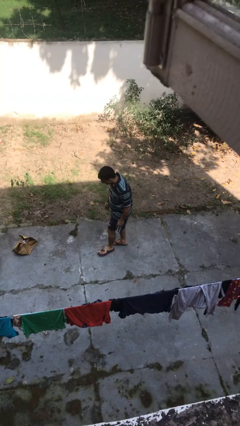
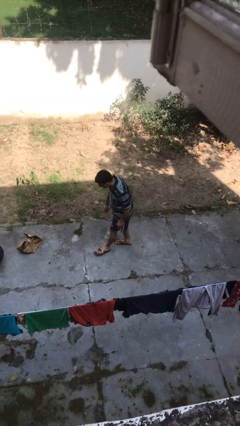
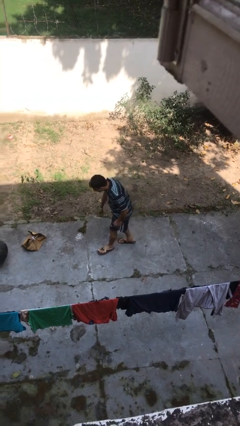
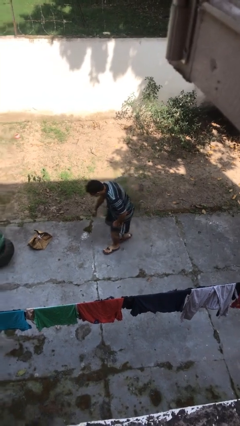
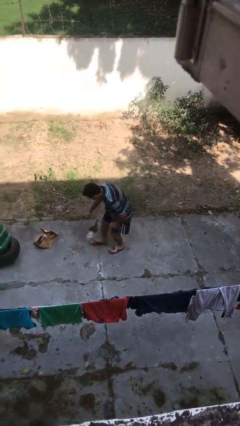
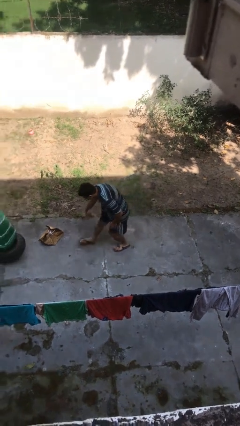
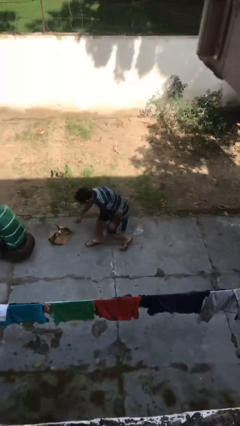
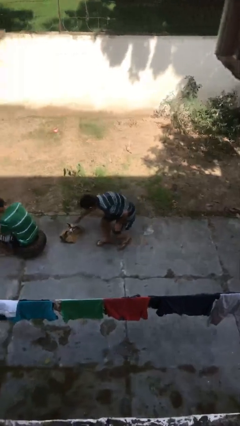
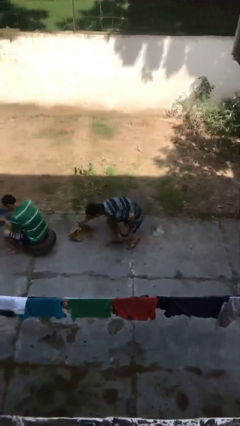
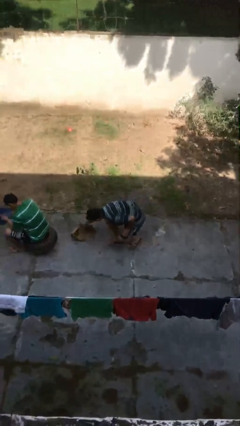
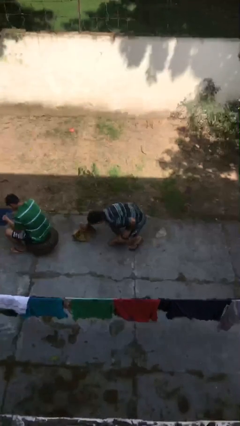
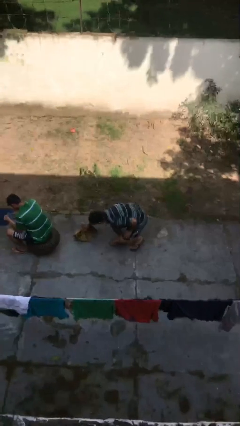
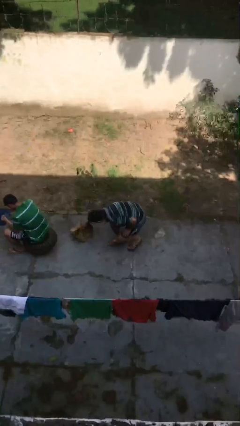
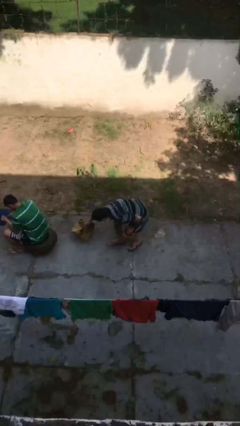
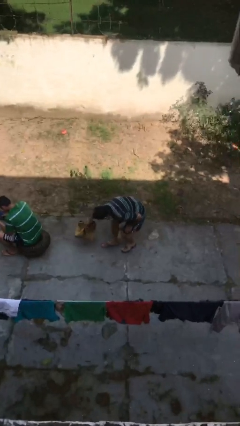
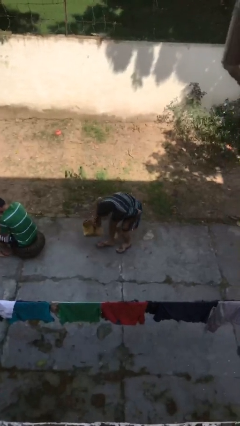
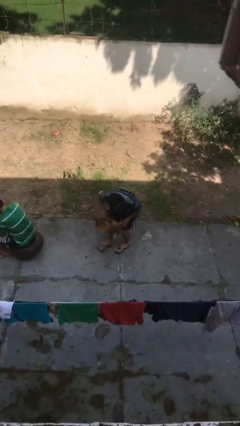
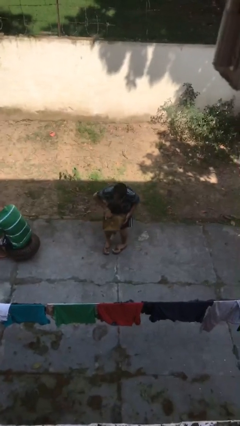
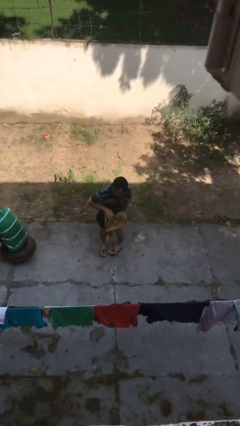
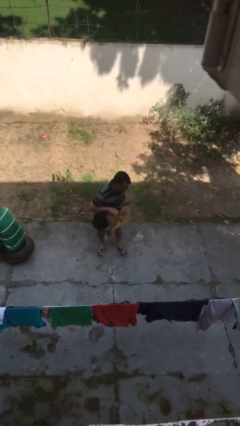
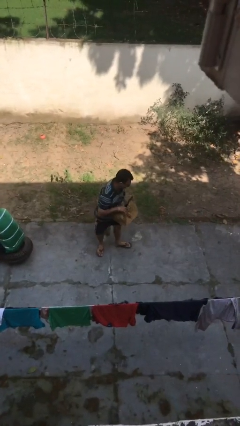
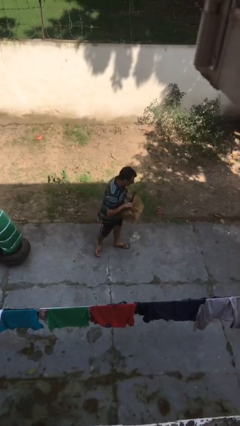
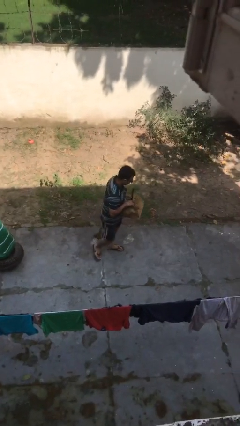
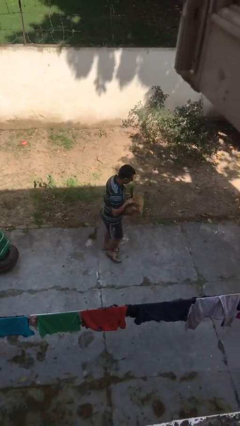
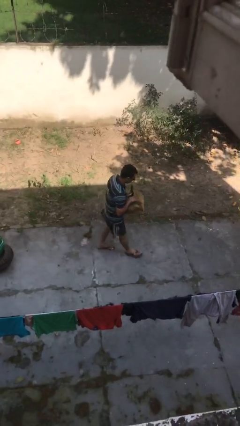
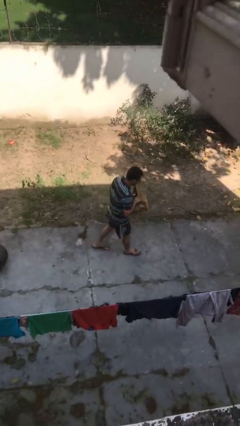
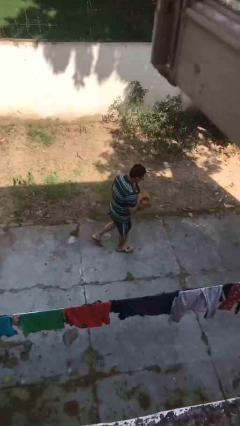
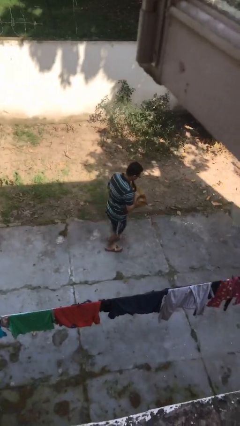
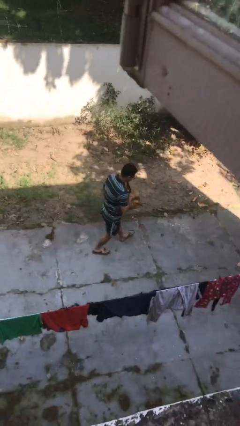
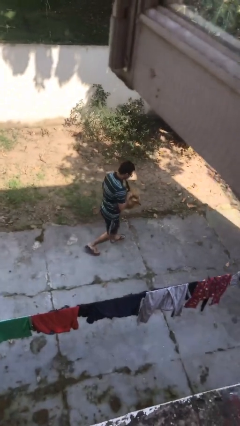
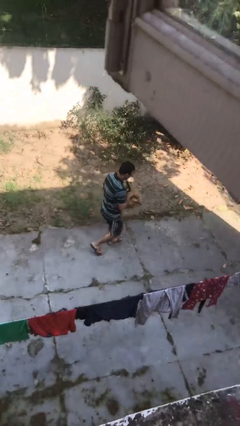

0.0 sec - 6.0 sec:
person steals object from person

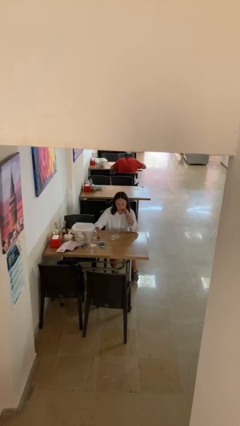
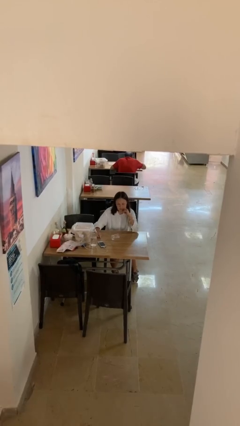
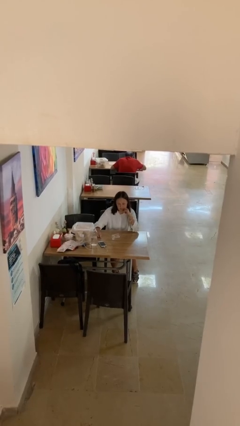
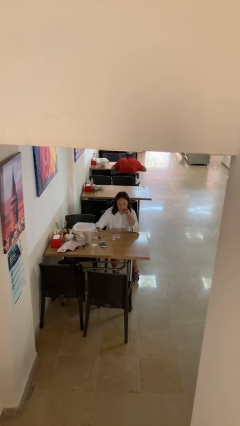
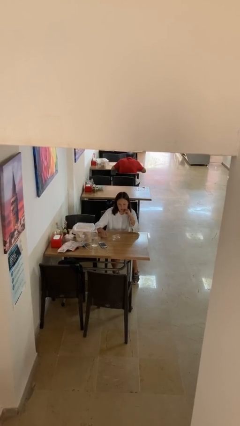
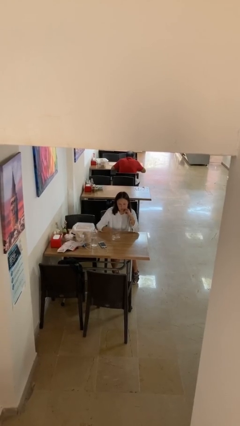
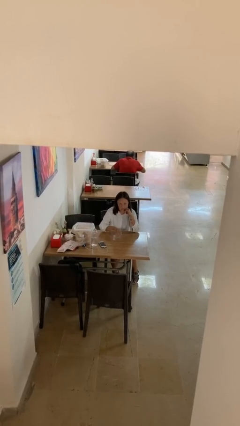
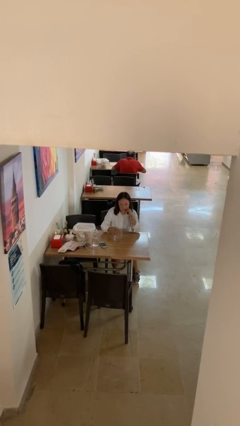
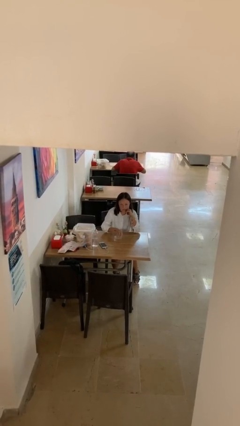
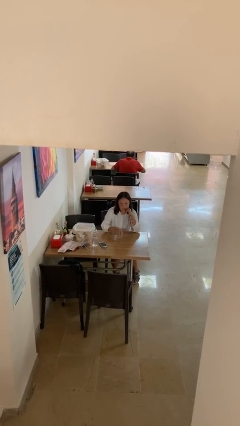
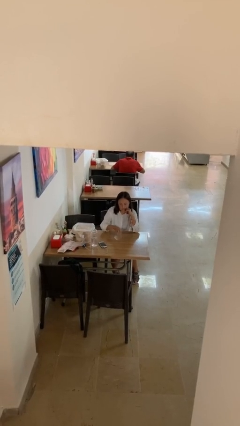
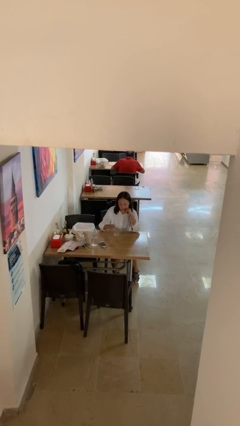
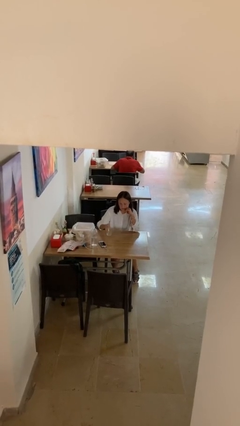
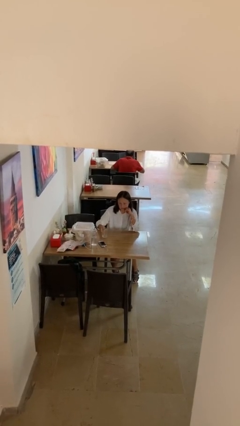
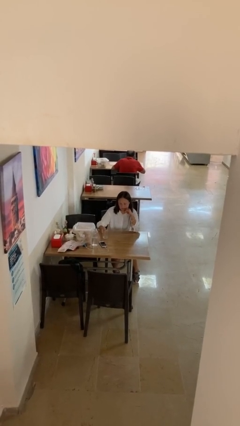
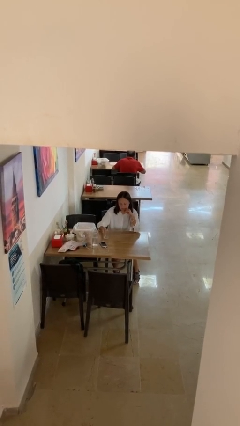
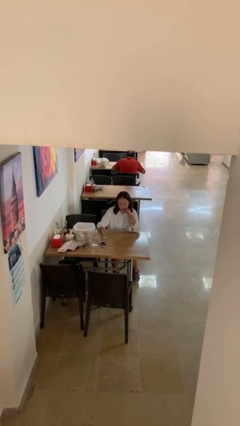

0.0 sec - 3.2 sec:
person sets upright glass

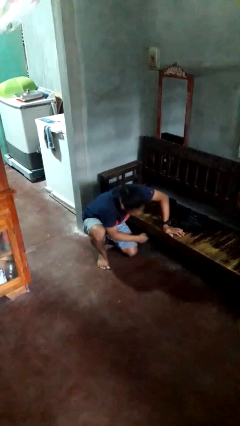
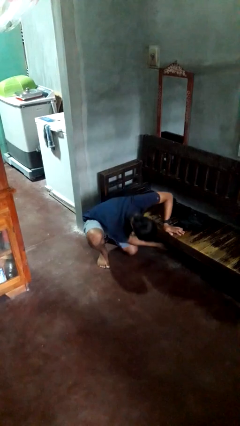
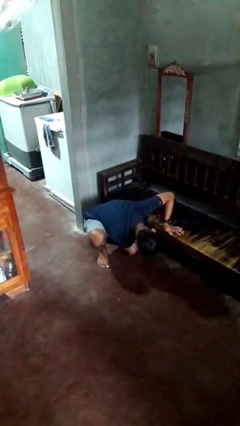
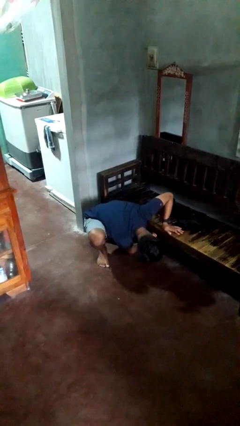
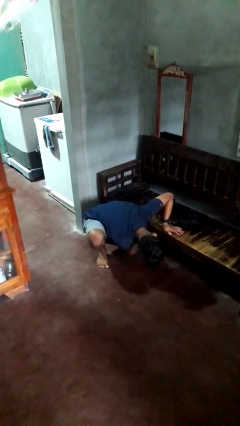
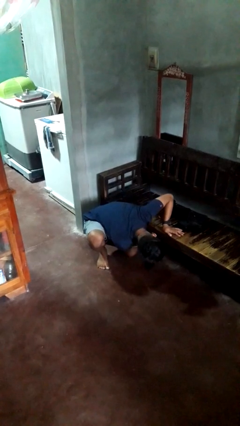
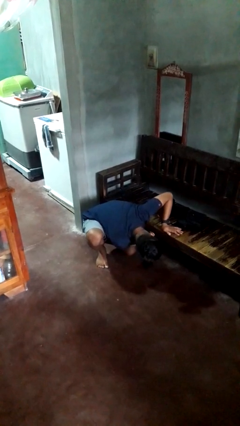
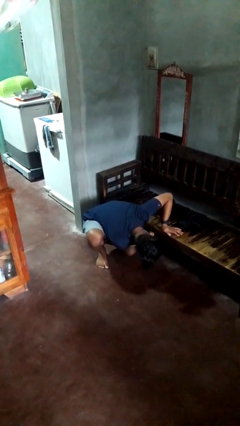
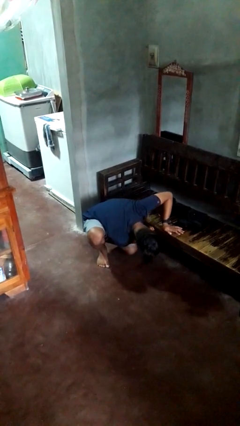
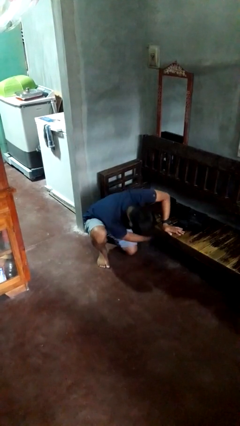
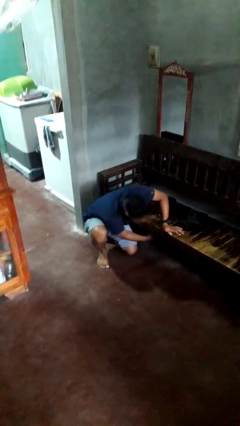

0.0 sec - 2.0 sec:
person searches under couch

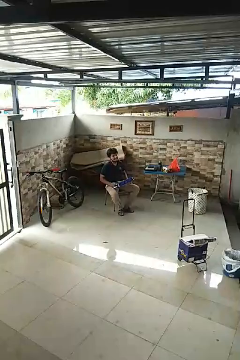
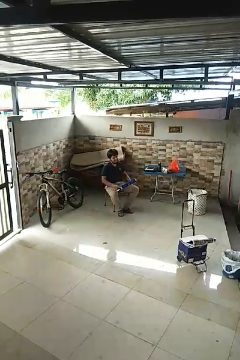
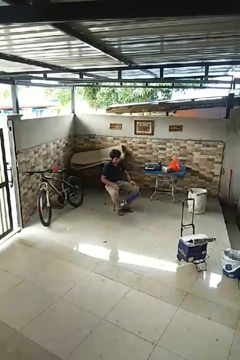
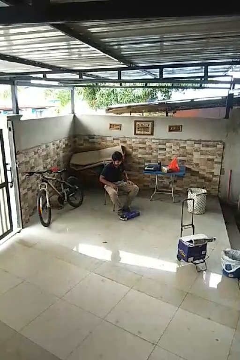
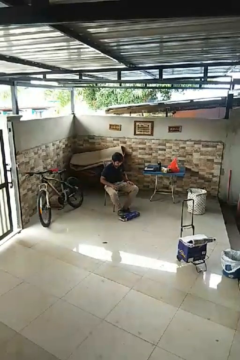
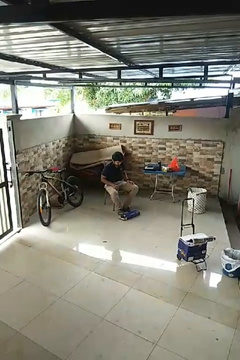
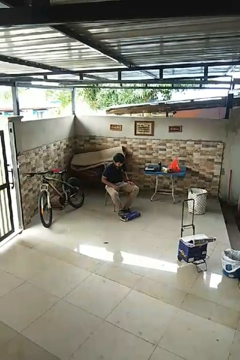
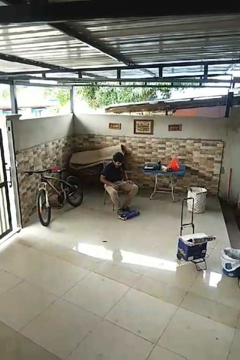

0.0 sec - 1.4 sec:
person drops object

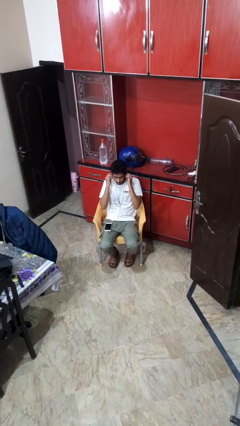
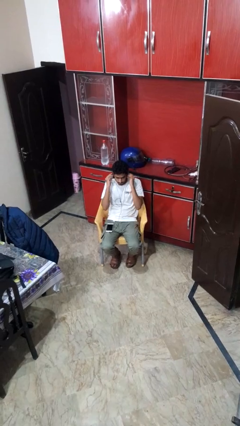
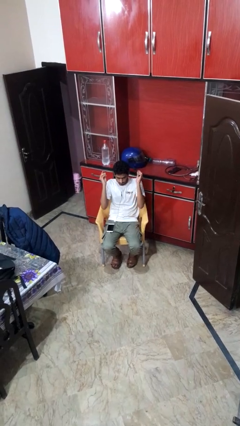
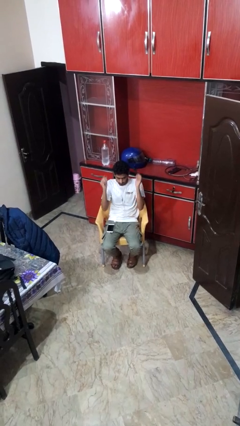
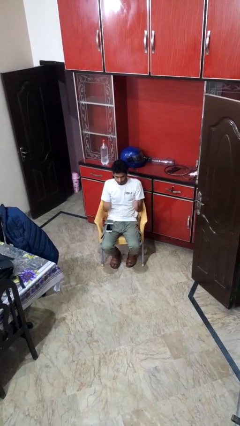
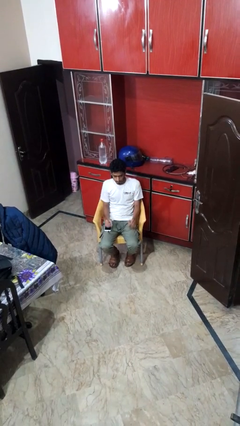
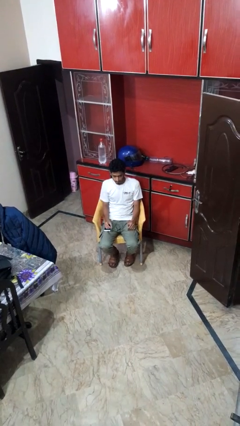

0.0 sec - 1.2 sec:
person takes off headphones

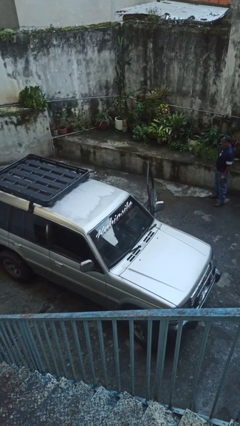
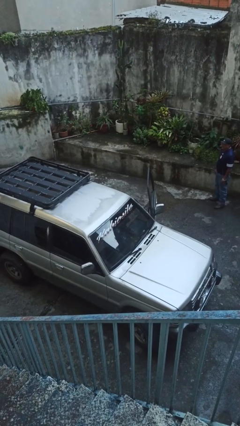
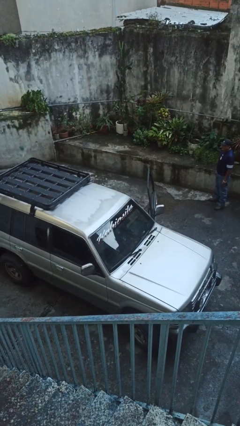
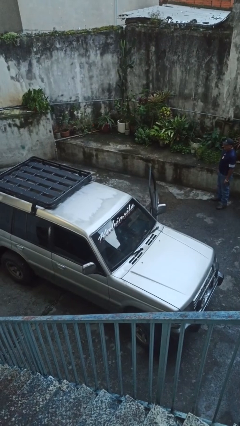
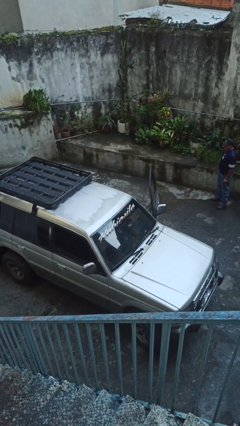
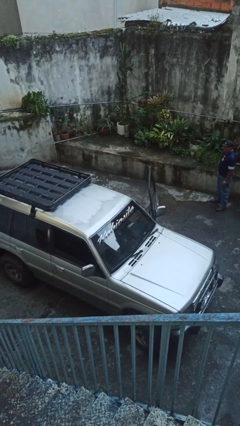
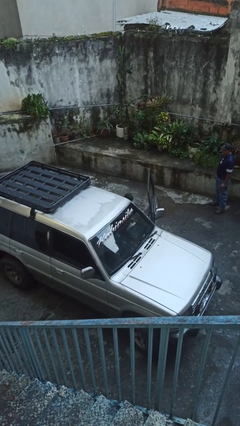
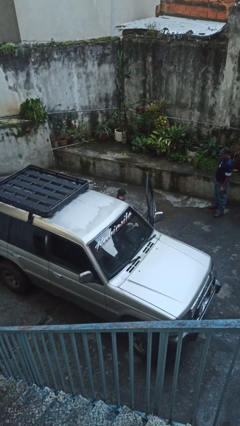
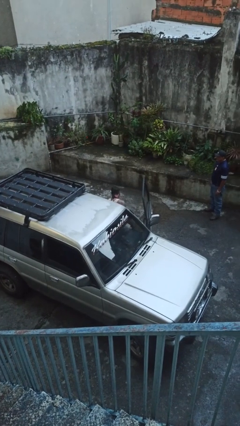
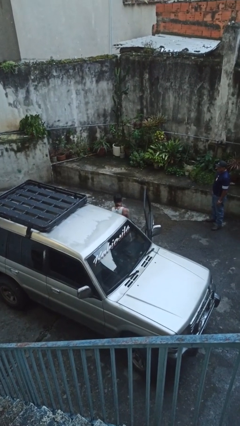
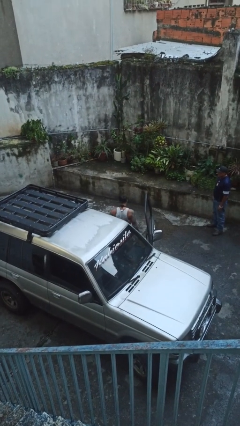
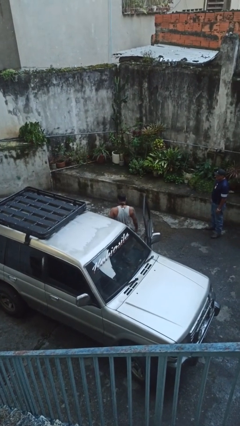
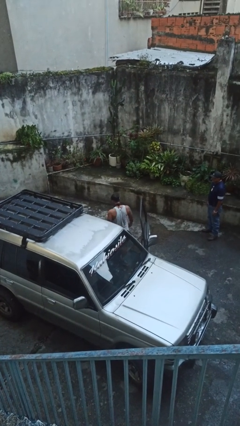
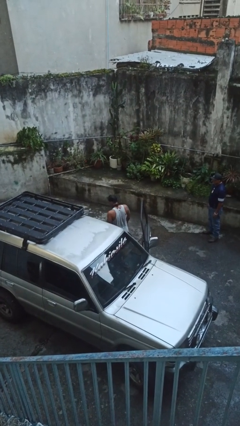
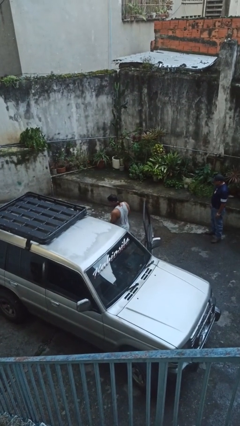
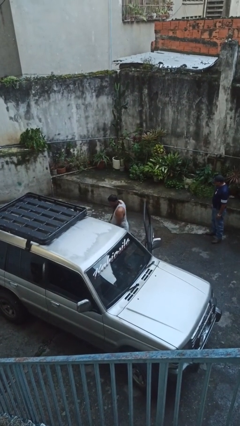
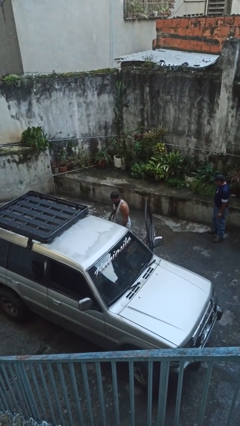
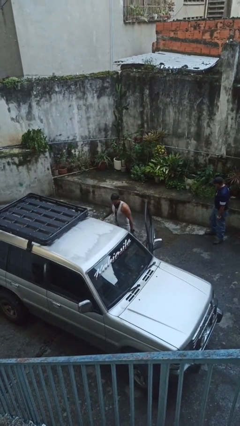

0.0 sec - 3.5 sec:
person exits car

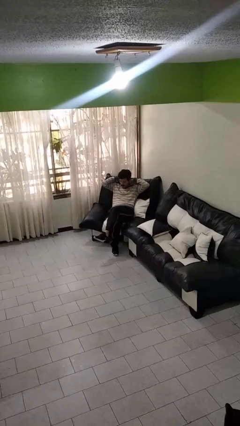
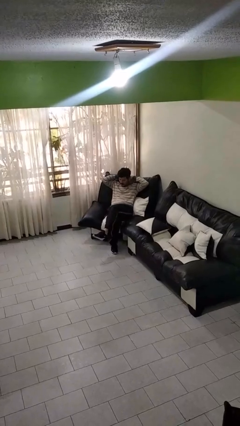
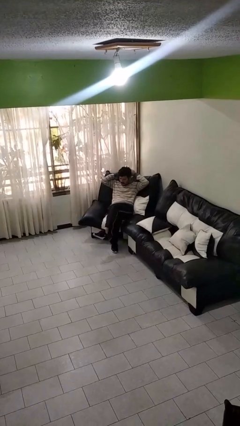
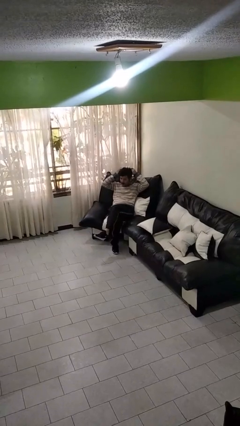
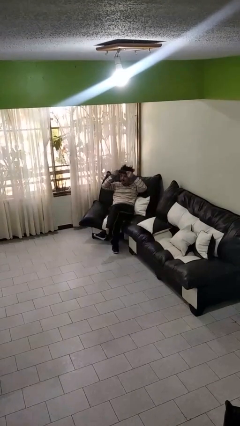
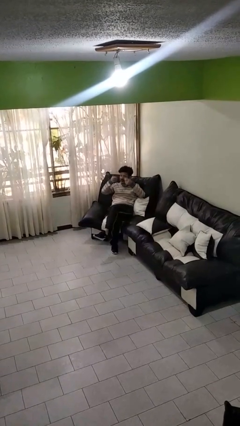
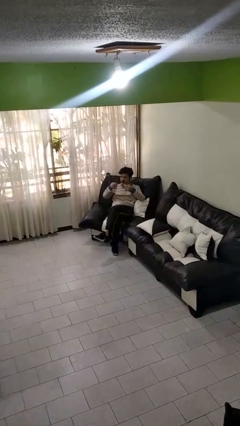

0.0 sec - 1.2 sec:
person takes off necklace
